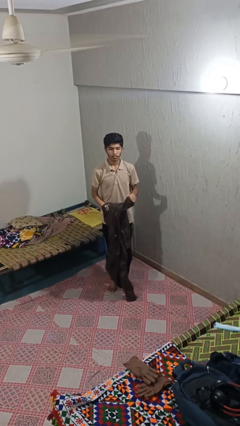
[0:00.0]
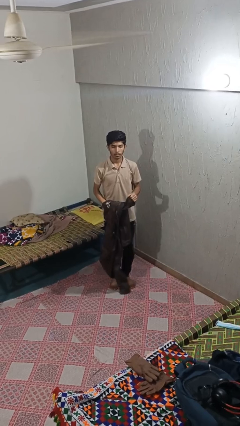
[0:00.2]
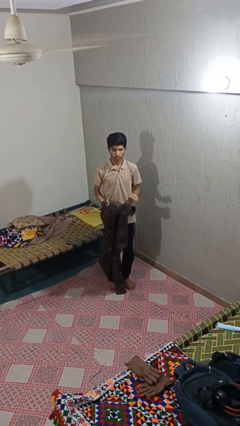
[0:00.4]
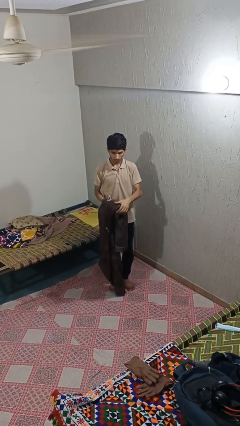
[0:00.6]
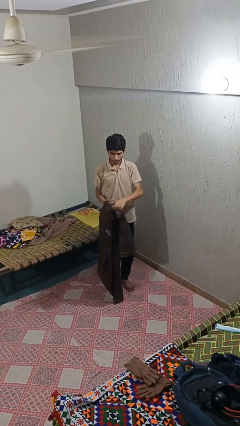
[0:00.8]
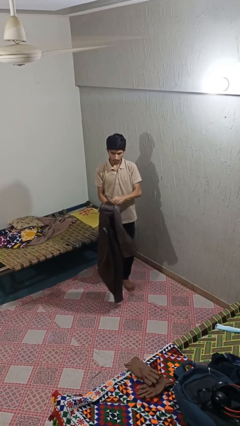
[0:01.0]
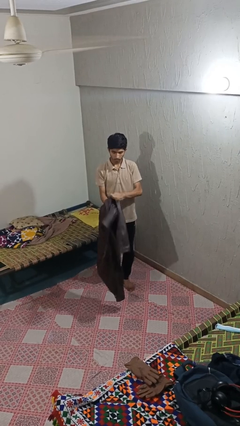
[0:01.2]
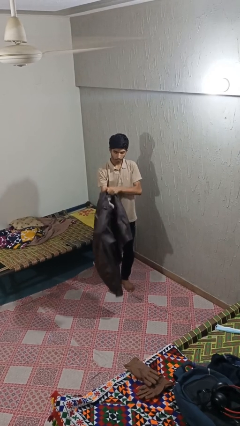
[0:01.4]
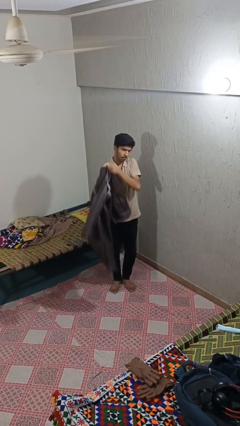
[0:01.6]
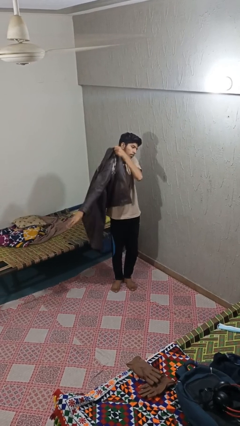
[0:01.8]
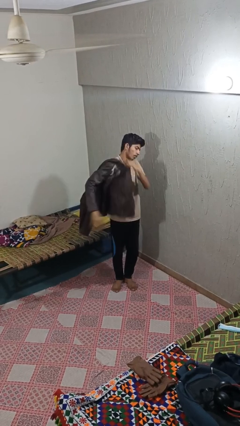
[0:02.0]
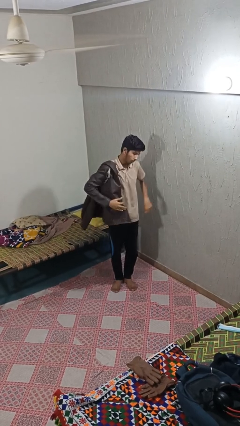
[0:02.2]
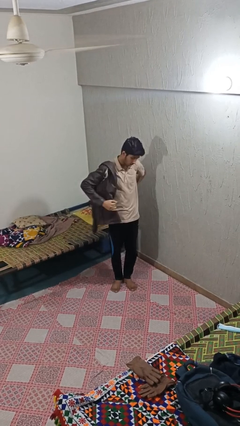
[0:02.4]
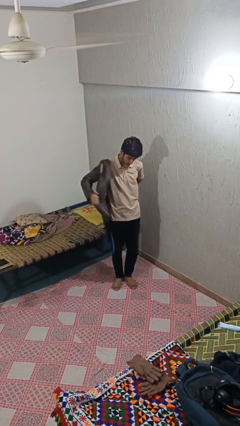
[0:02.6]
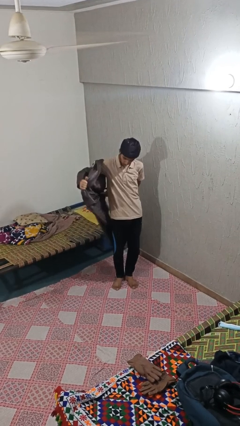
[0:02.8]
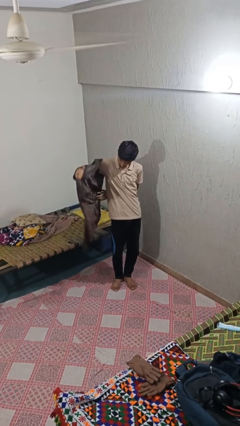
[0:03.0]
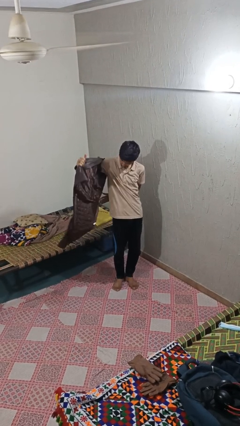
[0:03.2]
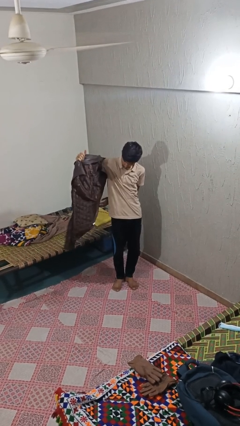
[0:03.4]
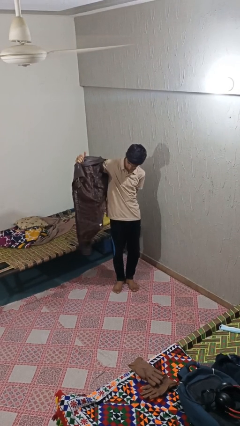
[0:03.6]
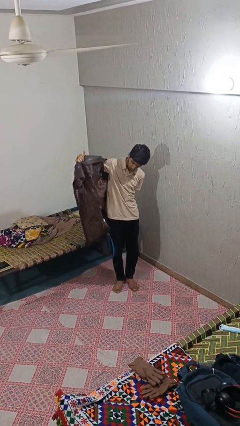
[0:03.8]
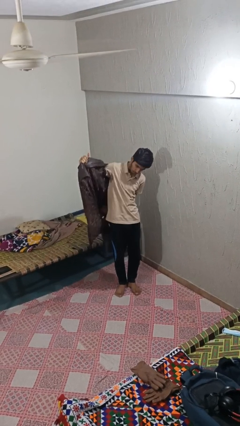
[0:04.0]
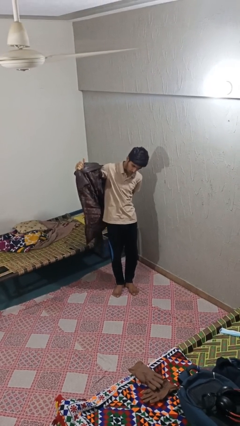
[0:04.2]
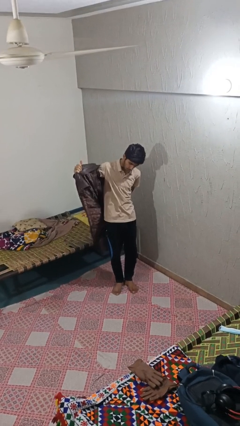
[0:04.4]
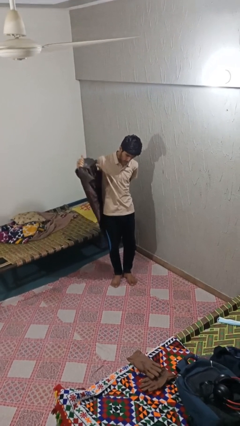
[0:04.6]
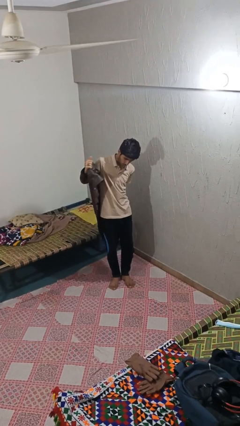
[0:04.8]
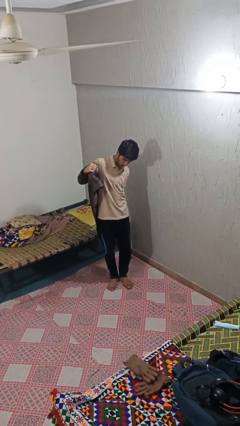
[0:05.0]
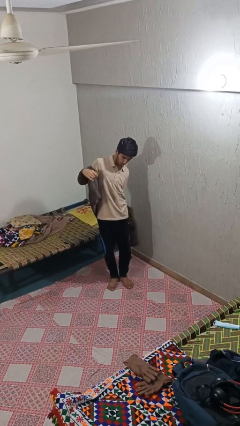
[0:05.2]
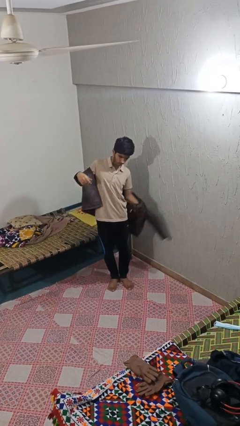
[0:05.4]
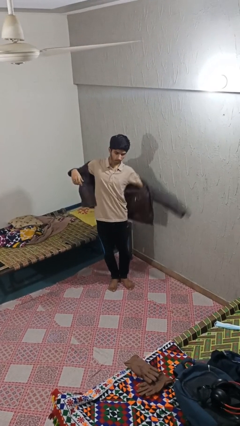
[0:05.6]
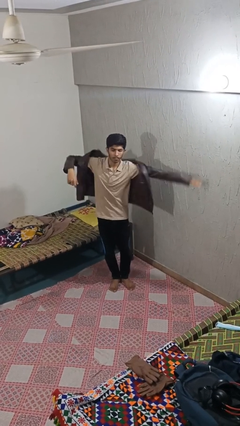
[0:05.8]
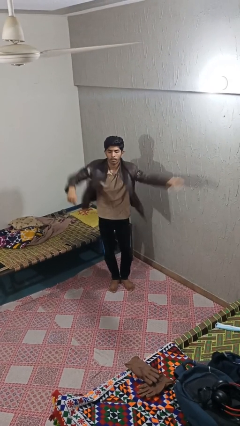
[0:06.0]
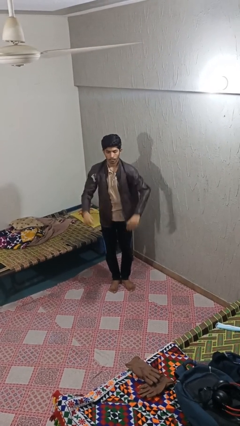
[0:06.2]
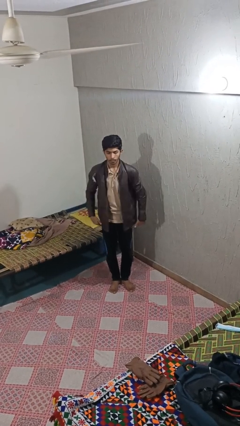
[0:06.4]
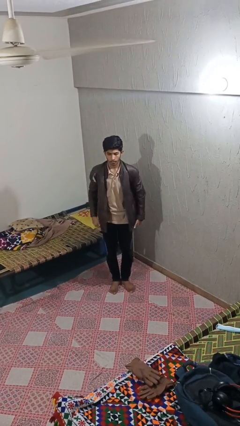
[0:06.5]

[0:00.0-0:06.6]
person puts on jacket

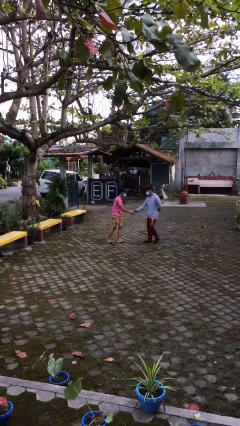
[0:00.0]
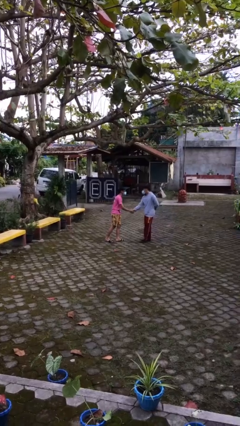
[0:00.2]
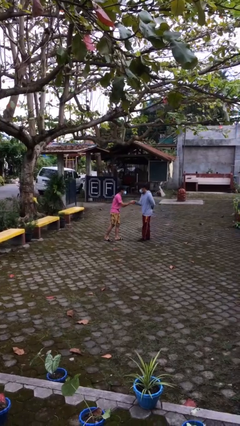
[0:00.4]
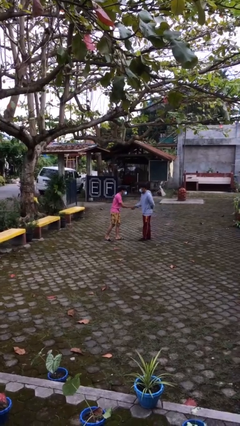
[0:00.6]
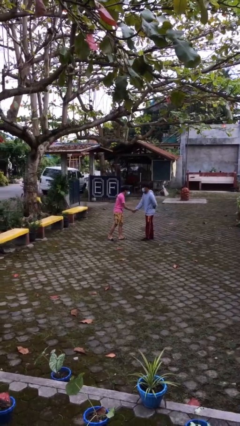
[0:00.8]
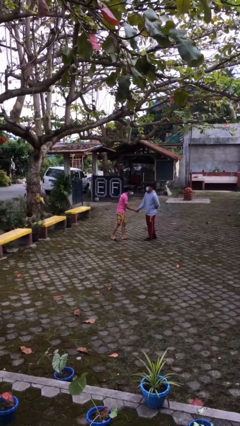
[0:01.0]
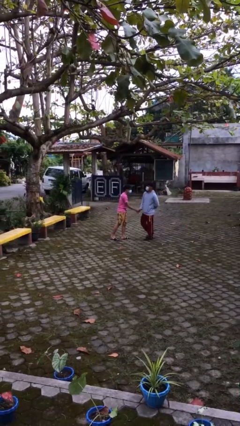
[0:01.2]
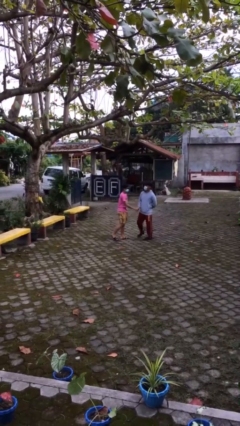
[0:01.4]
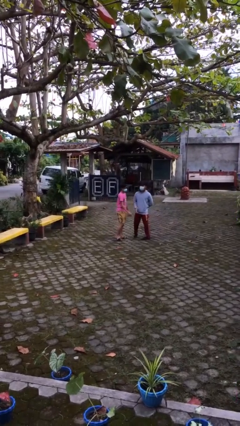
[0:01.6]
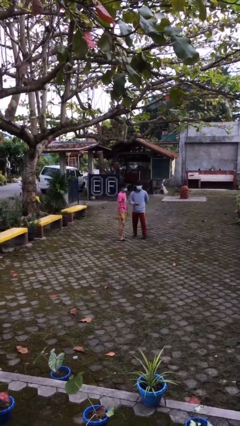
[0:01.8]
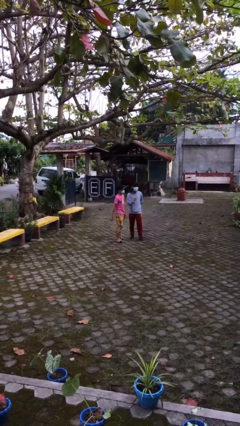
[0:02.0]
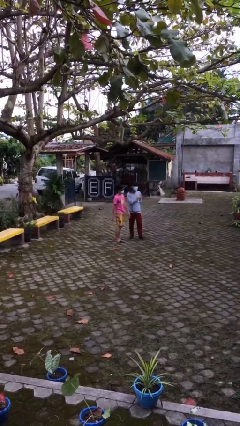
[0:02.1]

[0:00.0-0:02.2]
person shakes hand

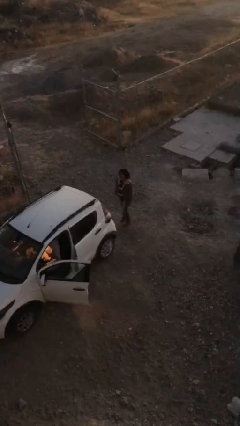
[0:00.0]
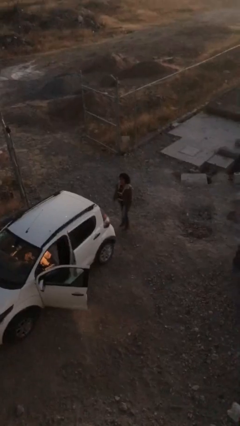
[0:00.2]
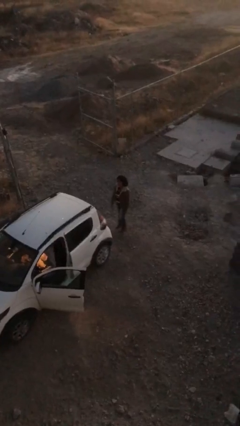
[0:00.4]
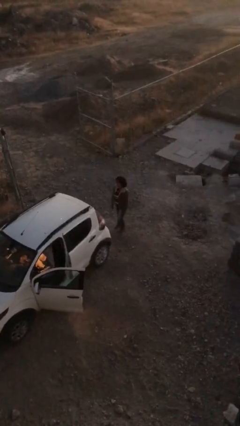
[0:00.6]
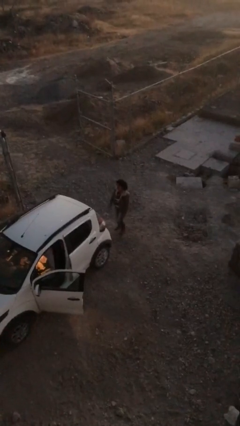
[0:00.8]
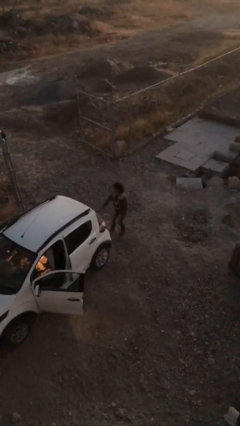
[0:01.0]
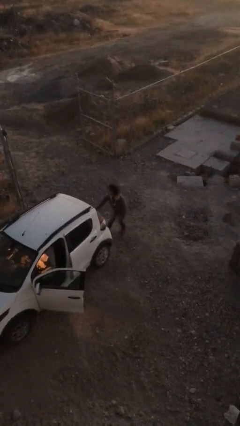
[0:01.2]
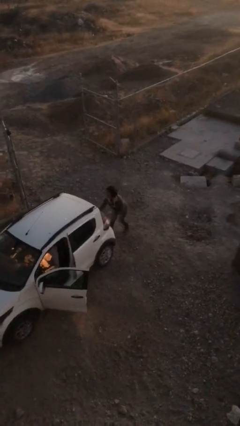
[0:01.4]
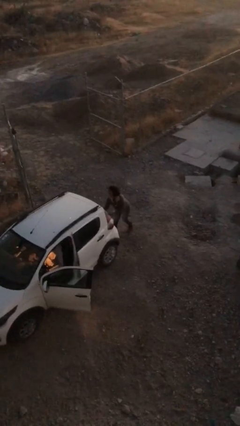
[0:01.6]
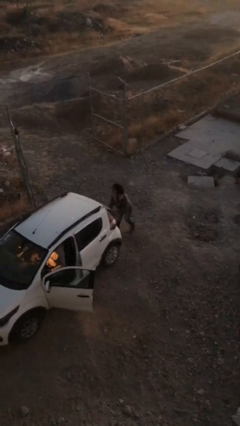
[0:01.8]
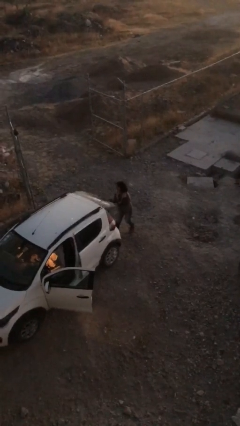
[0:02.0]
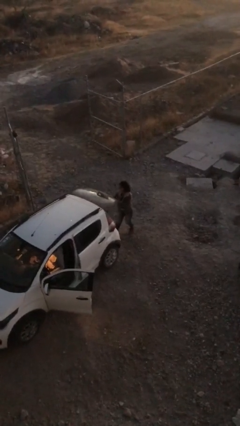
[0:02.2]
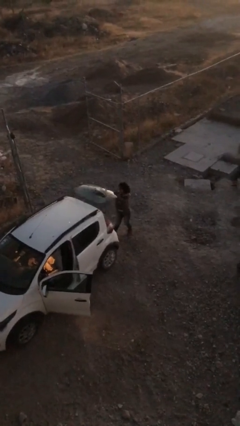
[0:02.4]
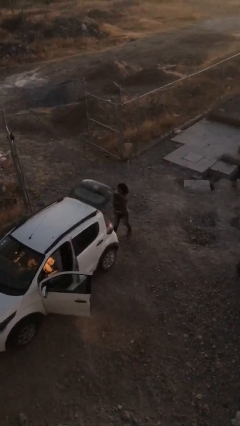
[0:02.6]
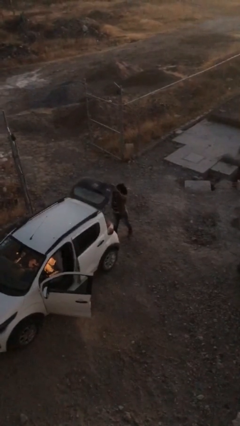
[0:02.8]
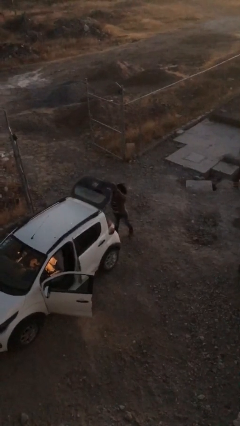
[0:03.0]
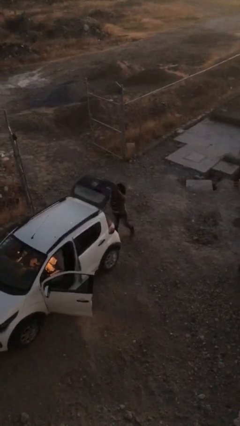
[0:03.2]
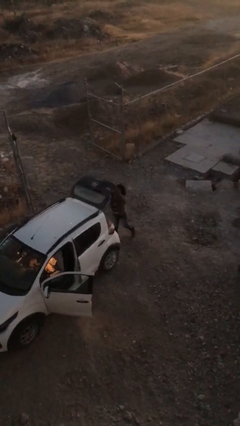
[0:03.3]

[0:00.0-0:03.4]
person opens car trunk

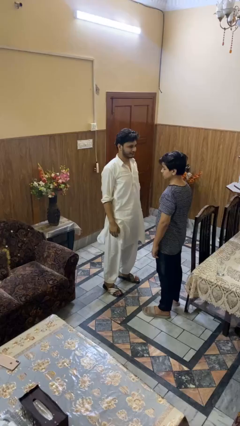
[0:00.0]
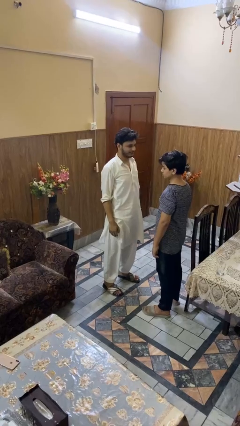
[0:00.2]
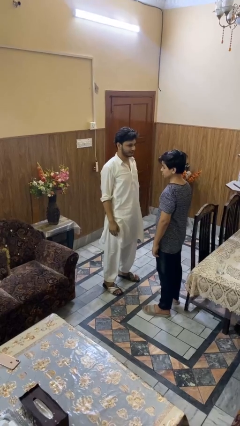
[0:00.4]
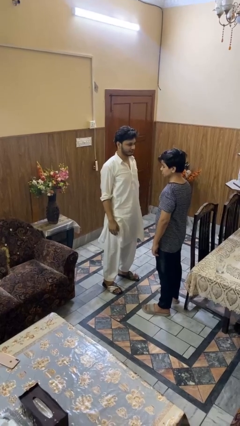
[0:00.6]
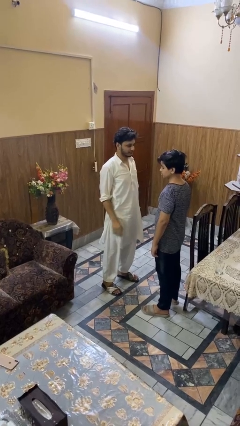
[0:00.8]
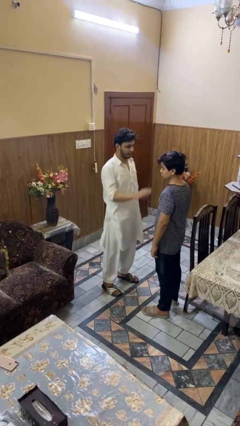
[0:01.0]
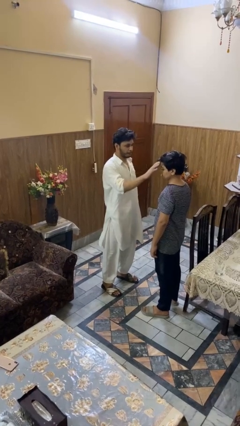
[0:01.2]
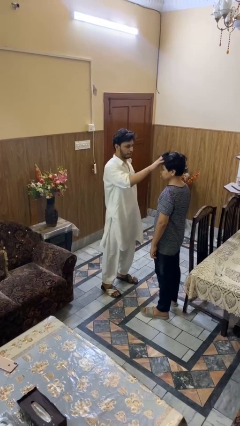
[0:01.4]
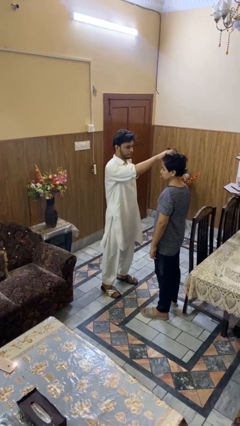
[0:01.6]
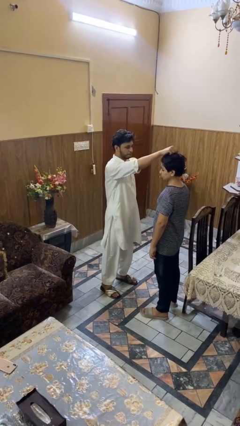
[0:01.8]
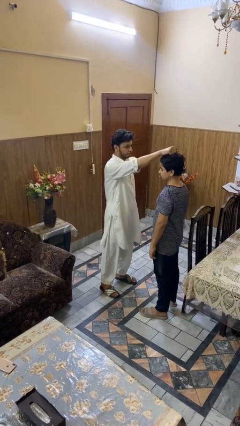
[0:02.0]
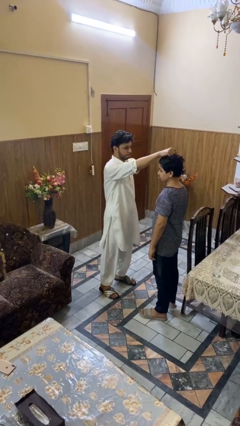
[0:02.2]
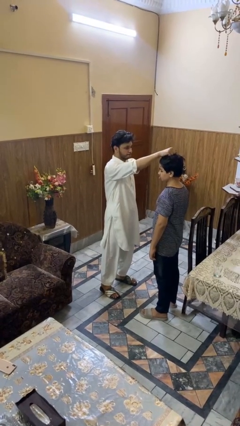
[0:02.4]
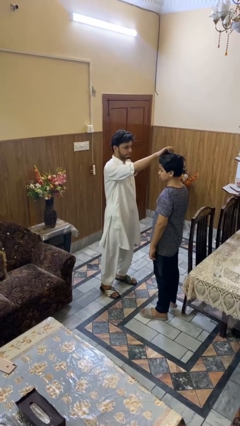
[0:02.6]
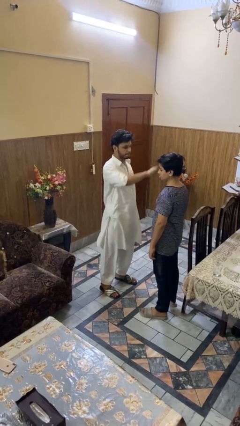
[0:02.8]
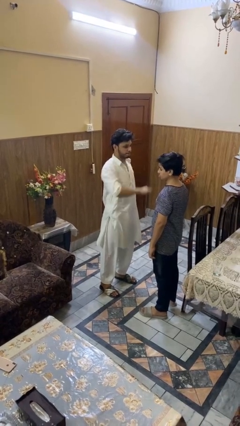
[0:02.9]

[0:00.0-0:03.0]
person grabs person by hair

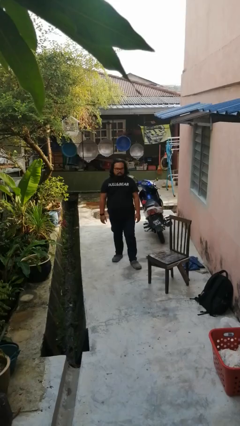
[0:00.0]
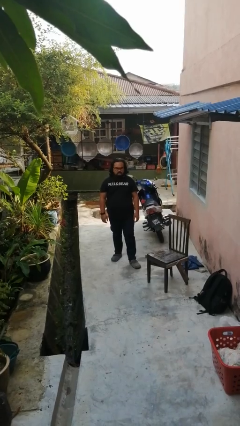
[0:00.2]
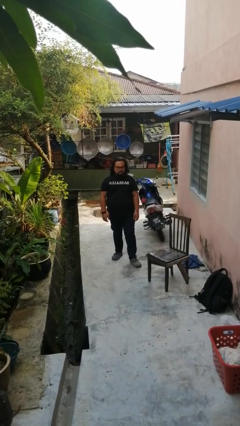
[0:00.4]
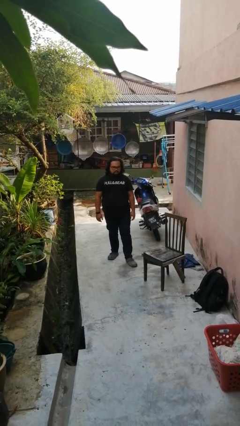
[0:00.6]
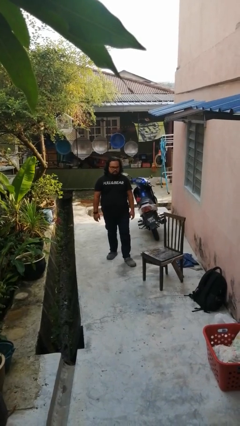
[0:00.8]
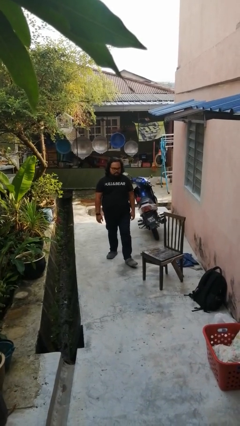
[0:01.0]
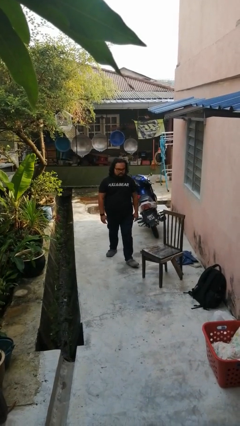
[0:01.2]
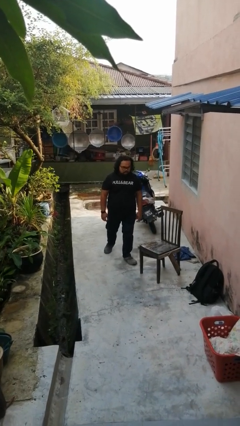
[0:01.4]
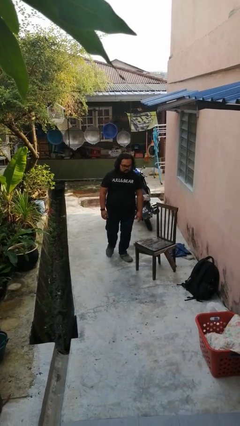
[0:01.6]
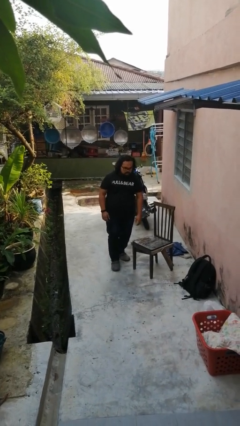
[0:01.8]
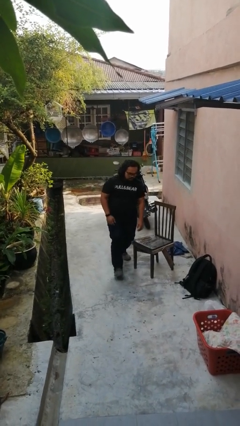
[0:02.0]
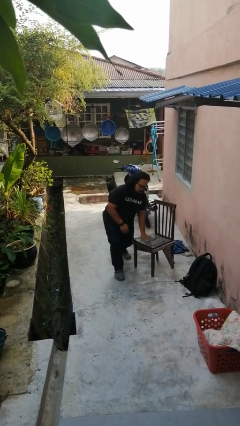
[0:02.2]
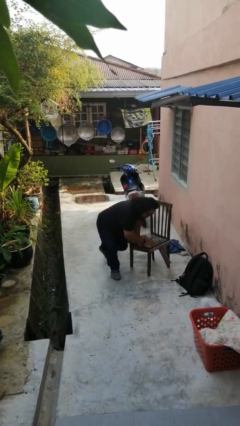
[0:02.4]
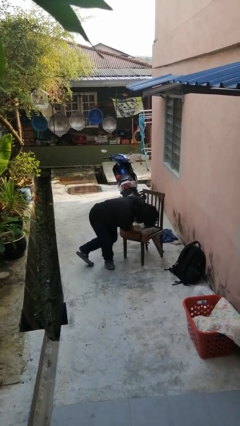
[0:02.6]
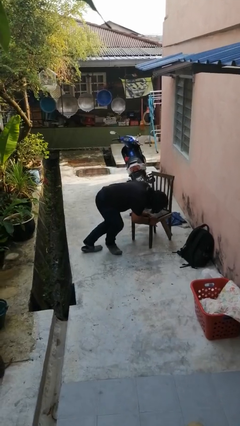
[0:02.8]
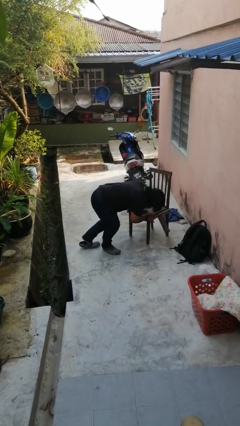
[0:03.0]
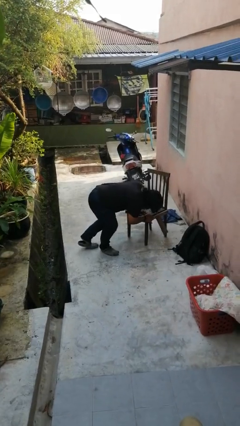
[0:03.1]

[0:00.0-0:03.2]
person trips on object on floor
